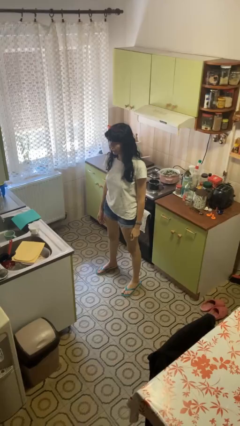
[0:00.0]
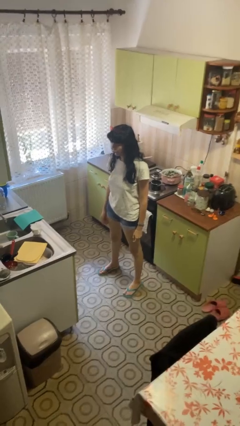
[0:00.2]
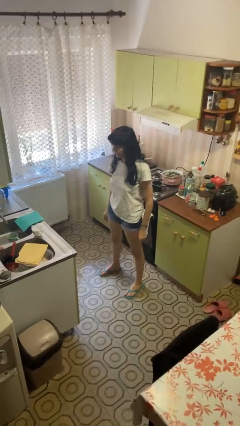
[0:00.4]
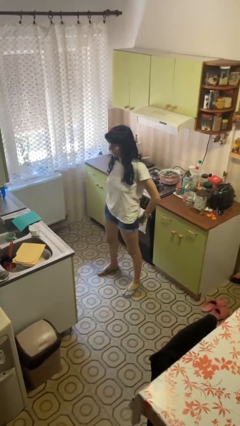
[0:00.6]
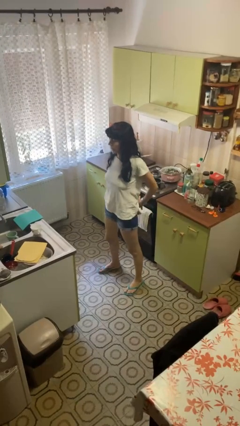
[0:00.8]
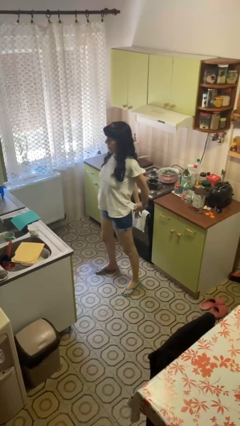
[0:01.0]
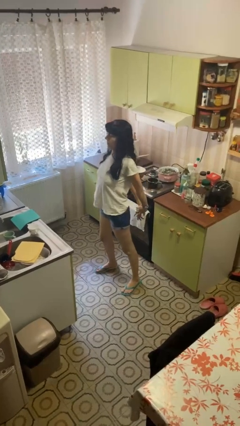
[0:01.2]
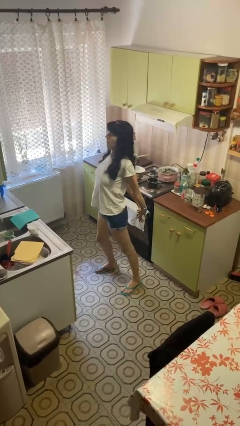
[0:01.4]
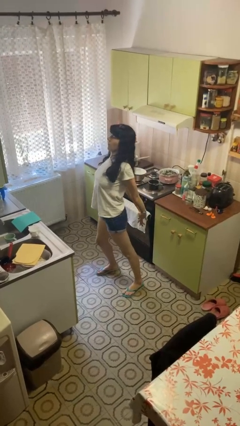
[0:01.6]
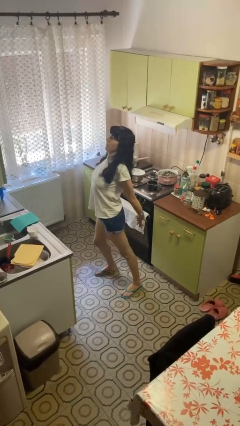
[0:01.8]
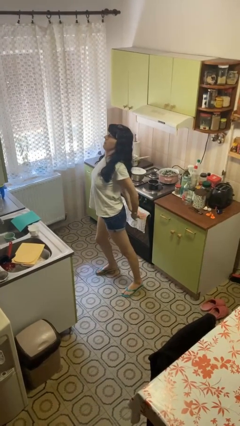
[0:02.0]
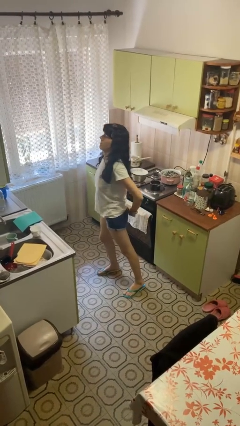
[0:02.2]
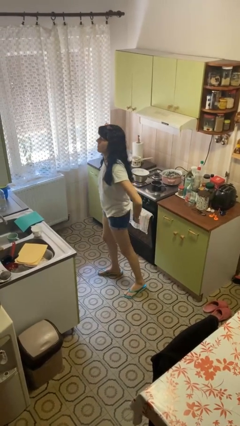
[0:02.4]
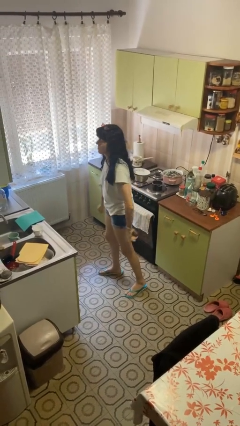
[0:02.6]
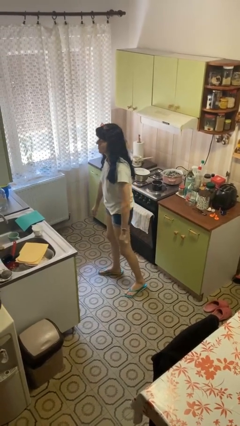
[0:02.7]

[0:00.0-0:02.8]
person stretches back

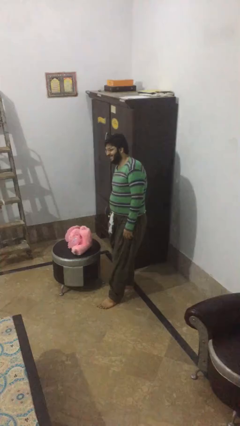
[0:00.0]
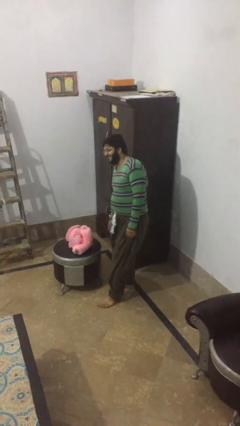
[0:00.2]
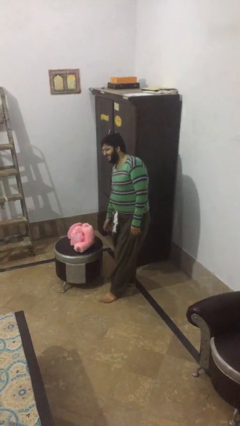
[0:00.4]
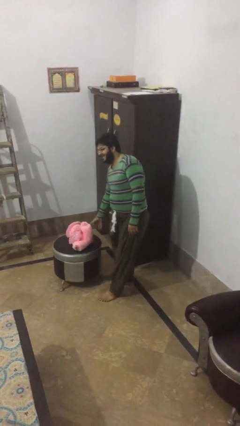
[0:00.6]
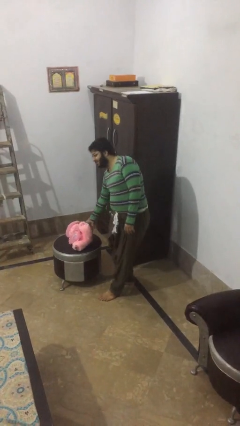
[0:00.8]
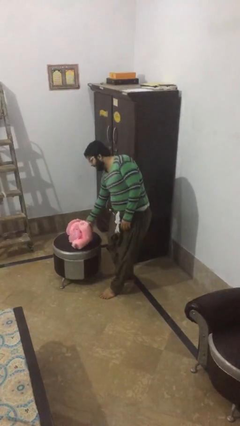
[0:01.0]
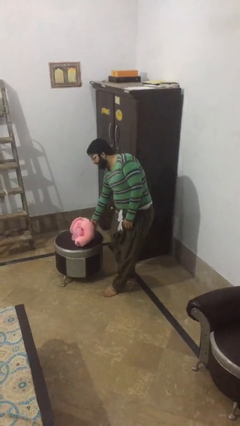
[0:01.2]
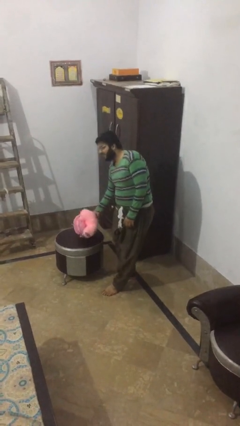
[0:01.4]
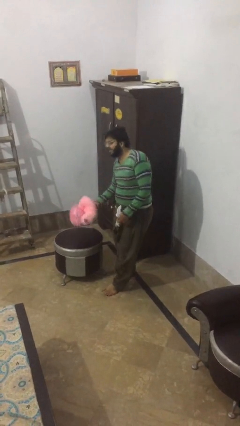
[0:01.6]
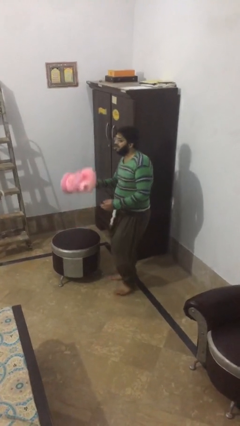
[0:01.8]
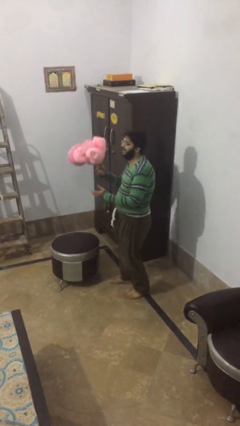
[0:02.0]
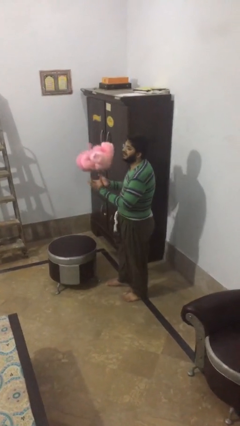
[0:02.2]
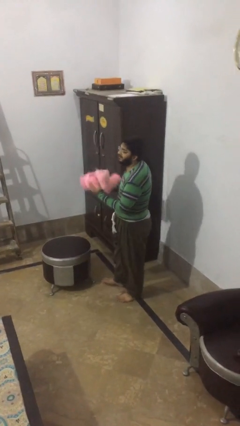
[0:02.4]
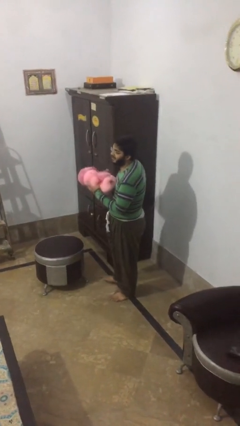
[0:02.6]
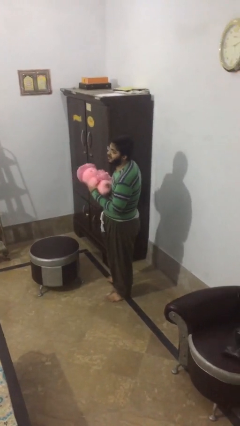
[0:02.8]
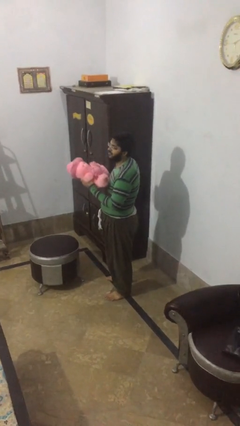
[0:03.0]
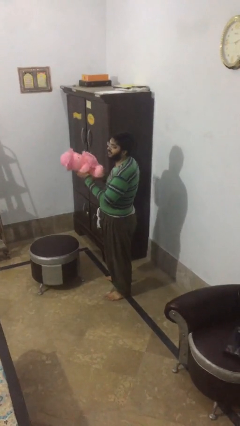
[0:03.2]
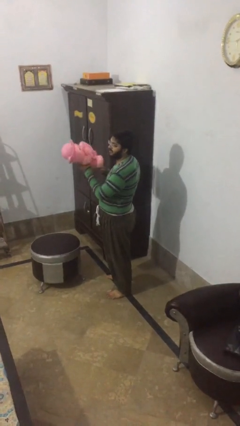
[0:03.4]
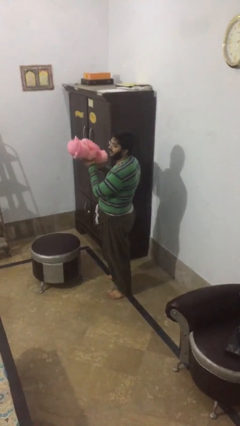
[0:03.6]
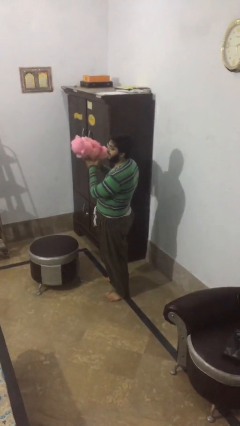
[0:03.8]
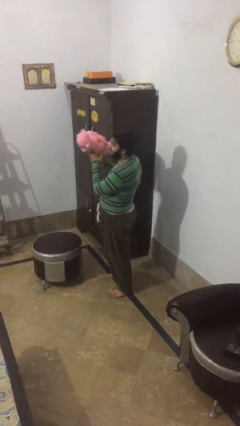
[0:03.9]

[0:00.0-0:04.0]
person picks up object from table

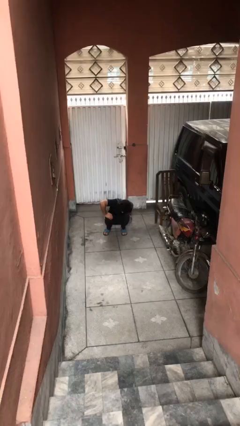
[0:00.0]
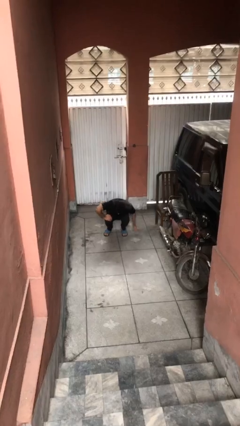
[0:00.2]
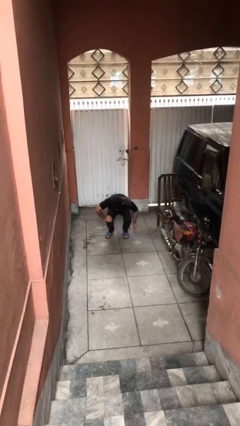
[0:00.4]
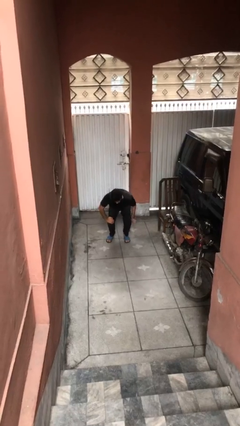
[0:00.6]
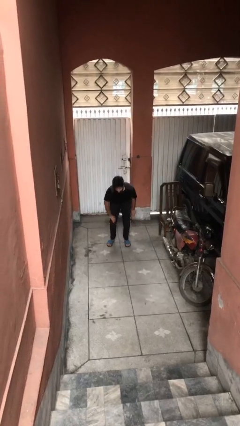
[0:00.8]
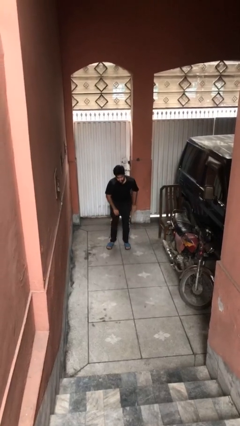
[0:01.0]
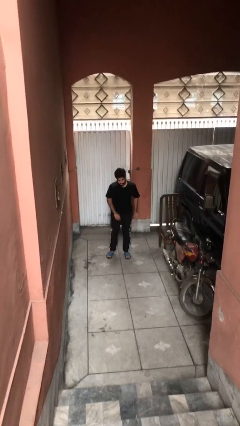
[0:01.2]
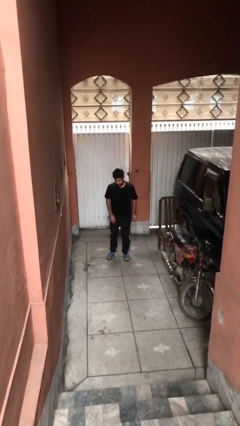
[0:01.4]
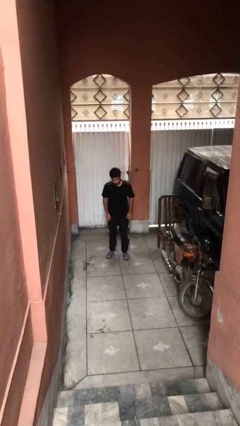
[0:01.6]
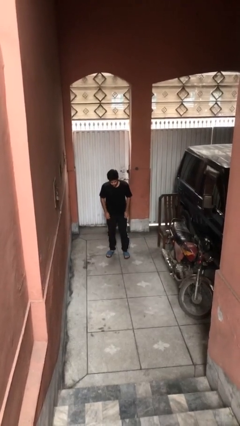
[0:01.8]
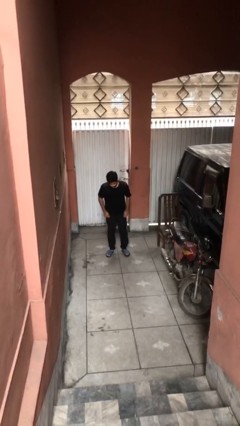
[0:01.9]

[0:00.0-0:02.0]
person stands up

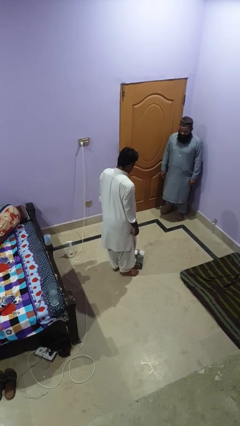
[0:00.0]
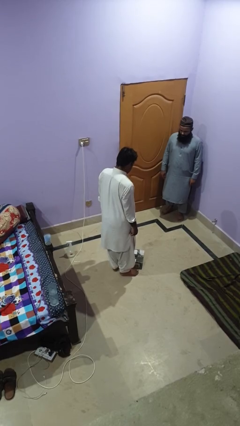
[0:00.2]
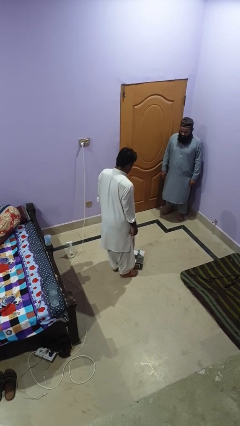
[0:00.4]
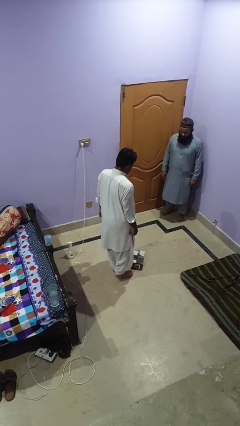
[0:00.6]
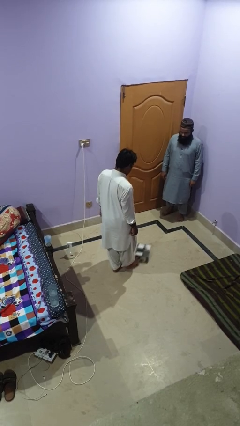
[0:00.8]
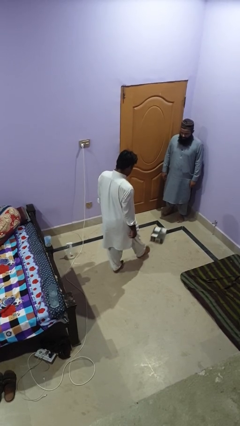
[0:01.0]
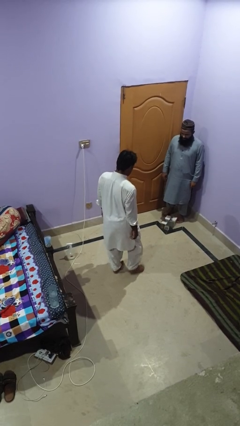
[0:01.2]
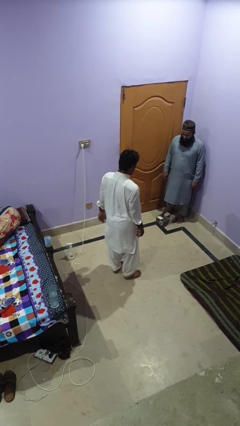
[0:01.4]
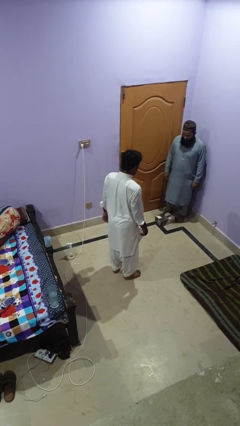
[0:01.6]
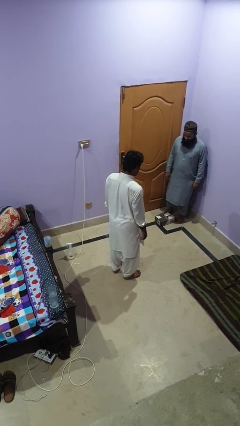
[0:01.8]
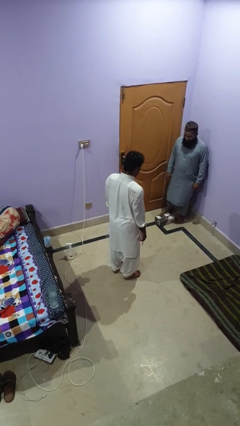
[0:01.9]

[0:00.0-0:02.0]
person kicks object to person

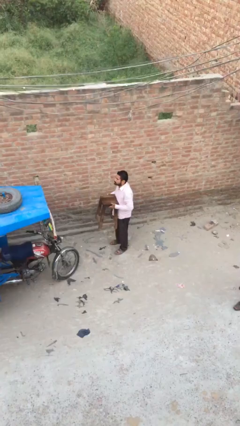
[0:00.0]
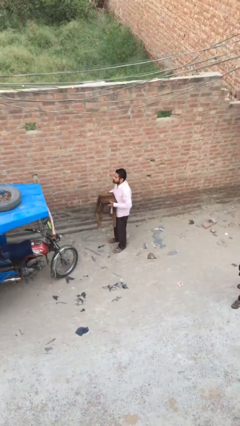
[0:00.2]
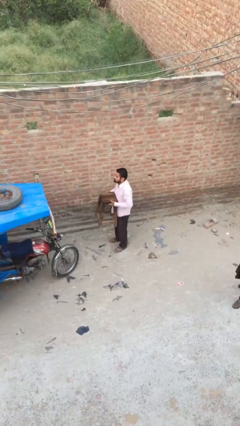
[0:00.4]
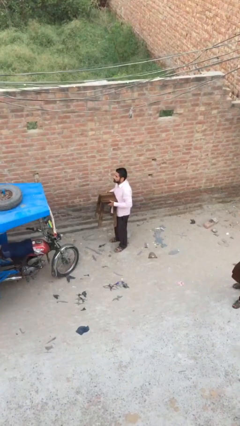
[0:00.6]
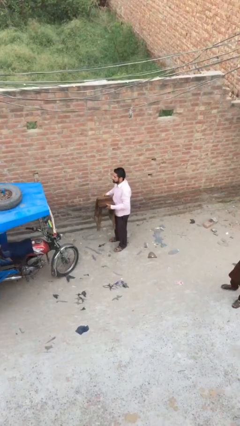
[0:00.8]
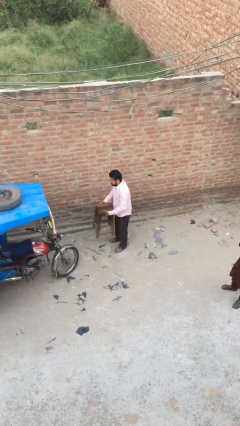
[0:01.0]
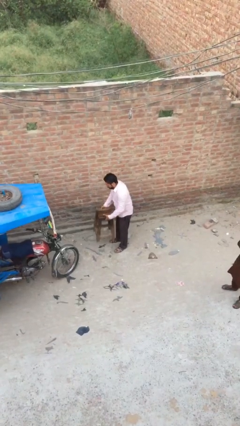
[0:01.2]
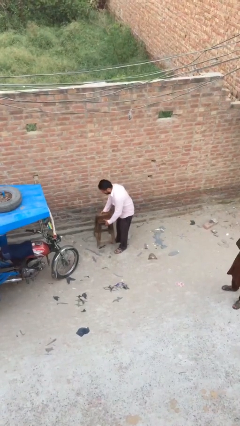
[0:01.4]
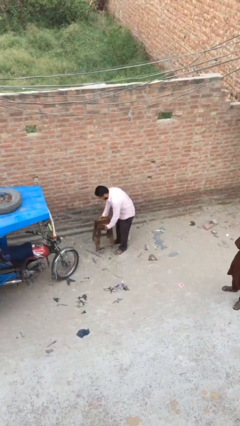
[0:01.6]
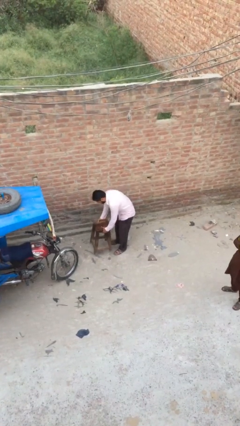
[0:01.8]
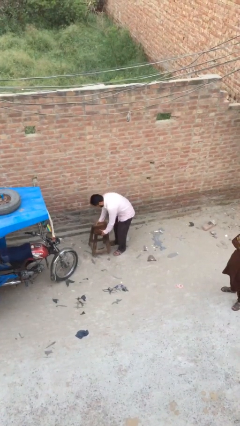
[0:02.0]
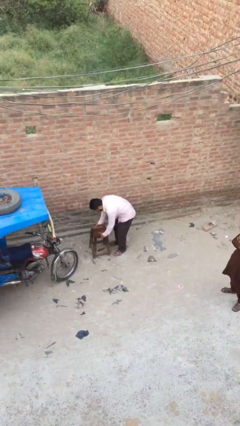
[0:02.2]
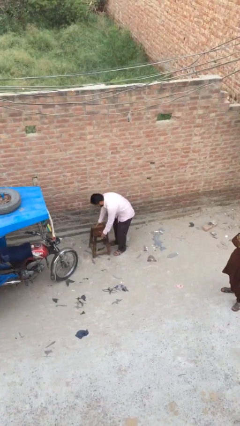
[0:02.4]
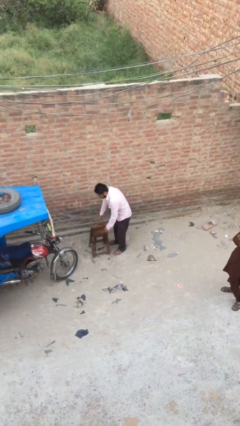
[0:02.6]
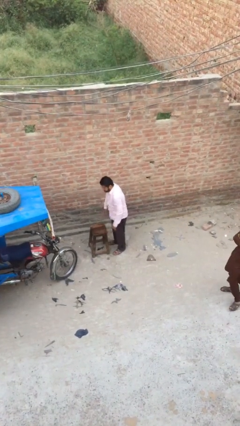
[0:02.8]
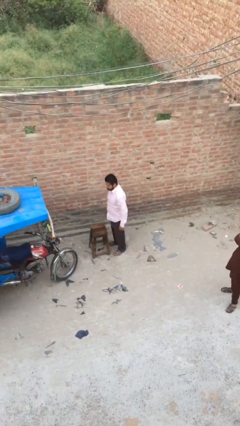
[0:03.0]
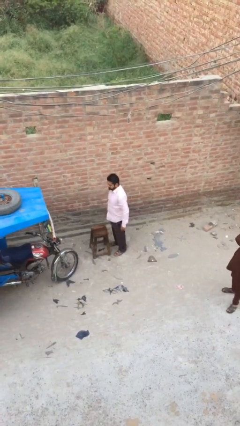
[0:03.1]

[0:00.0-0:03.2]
person puts down object on floor

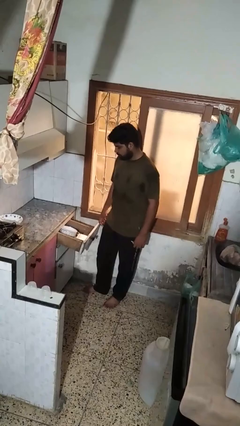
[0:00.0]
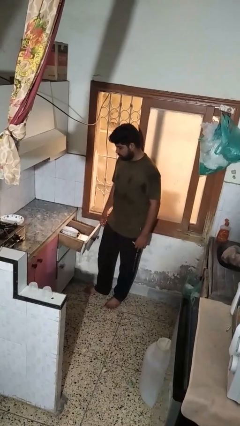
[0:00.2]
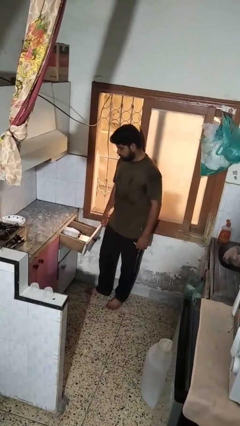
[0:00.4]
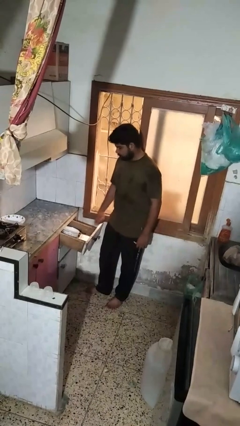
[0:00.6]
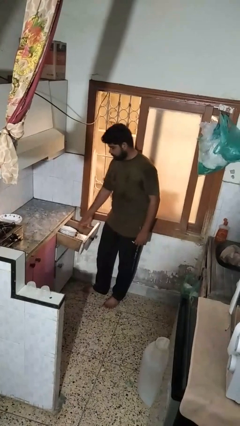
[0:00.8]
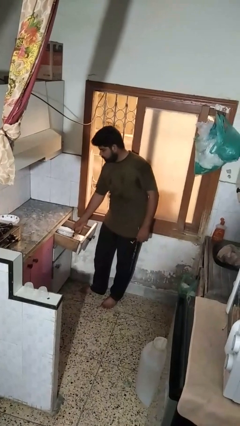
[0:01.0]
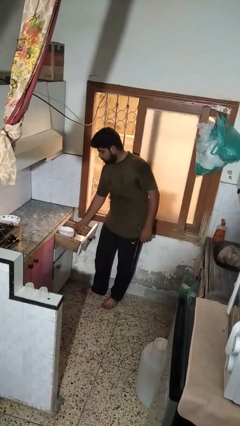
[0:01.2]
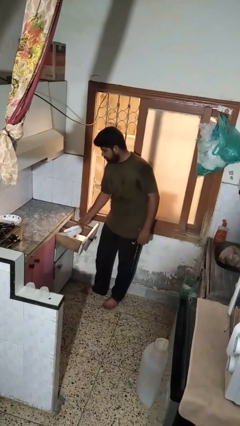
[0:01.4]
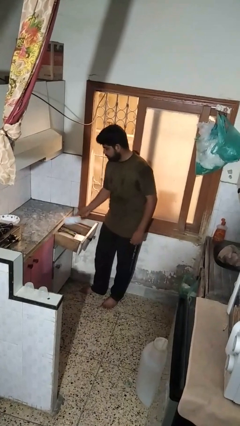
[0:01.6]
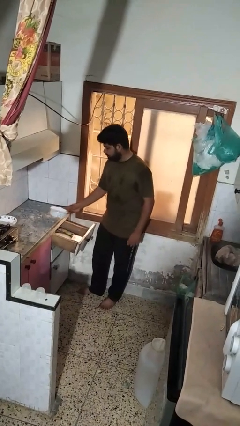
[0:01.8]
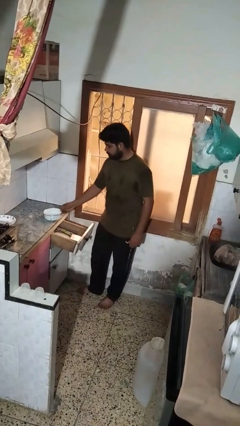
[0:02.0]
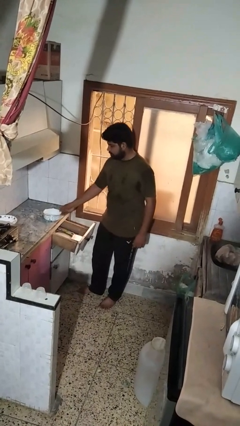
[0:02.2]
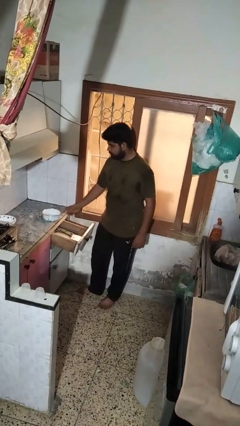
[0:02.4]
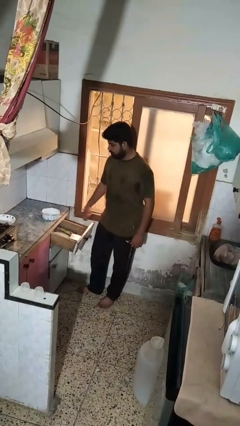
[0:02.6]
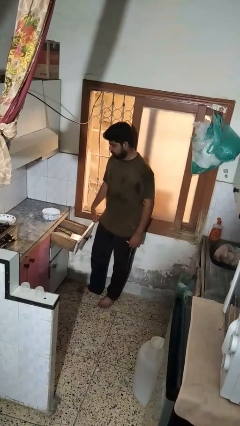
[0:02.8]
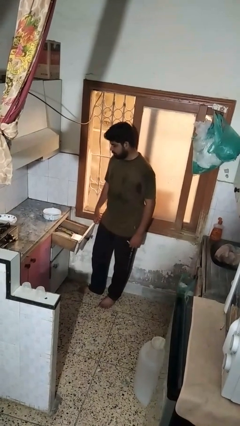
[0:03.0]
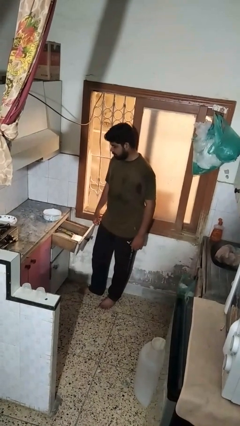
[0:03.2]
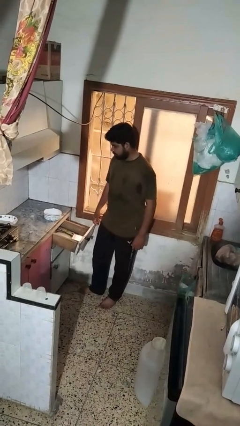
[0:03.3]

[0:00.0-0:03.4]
person takes object from kitchen drawer
